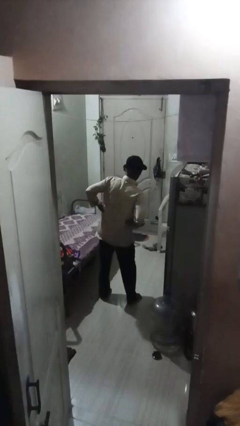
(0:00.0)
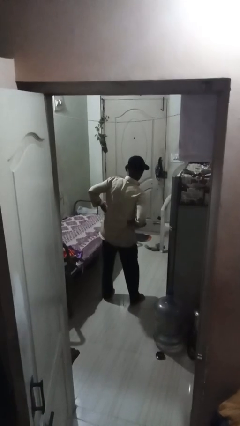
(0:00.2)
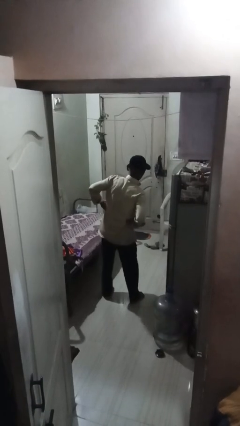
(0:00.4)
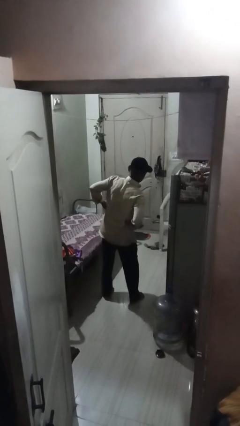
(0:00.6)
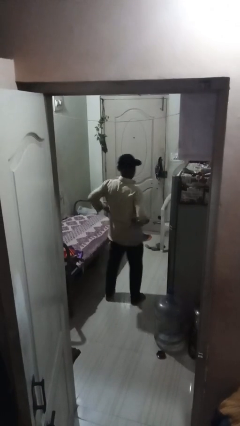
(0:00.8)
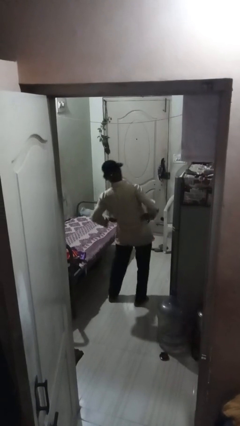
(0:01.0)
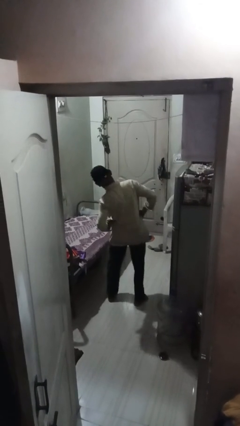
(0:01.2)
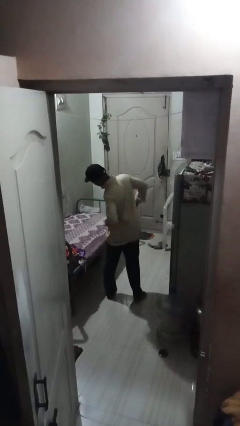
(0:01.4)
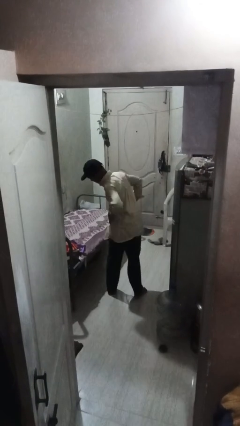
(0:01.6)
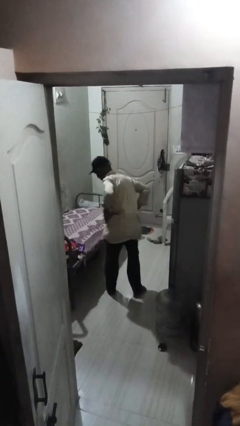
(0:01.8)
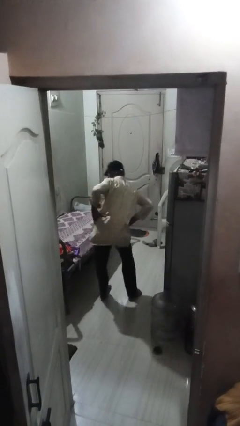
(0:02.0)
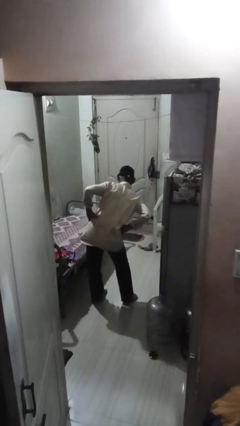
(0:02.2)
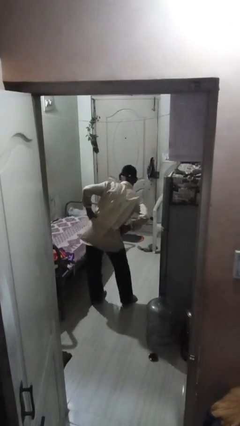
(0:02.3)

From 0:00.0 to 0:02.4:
person wiggles hips

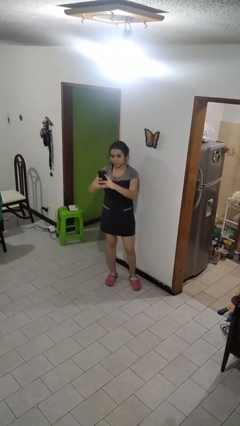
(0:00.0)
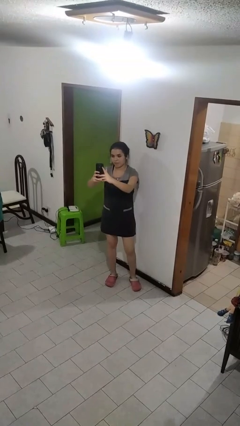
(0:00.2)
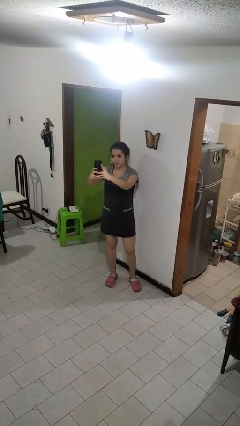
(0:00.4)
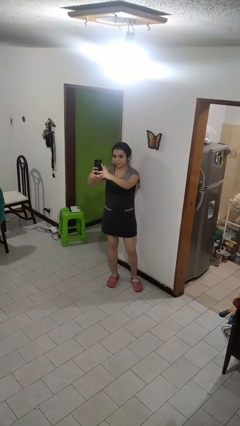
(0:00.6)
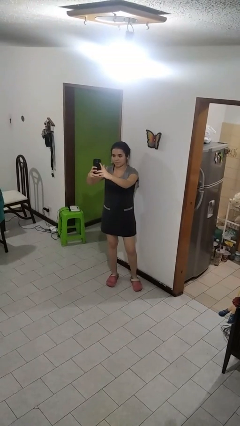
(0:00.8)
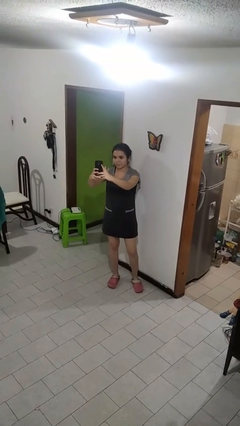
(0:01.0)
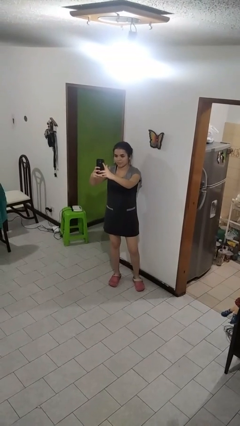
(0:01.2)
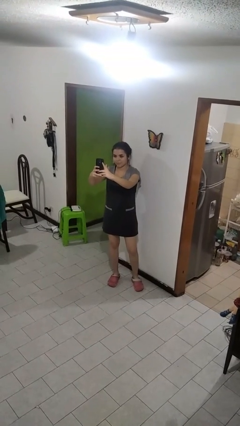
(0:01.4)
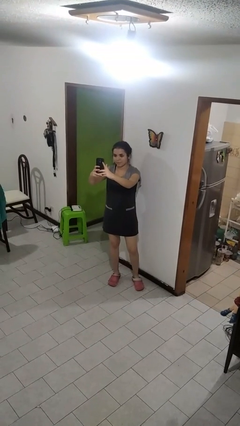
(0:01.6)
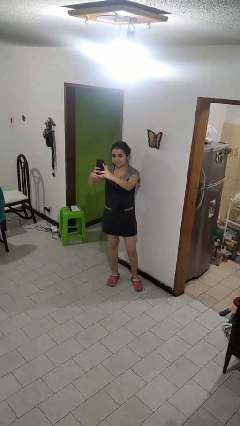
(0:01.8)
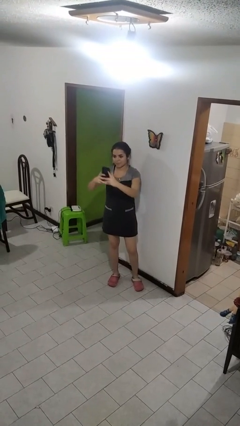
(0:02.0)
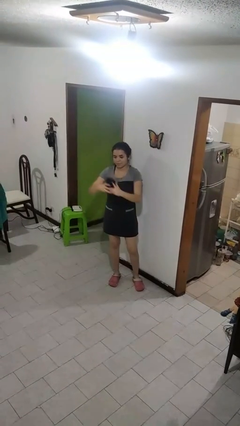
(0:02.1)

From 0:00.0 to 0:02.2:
person takes selfie

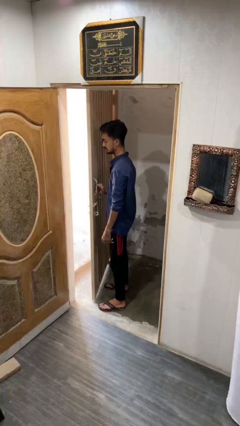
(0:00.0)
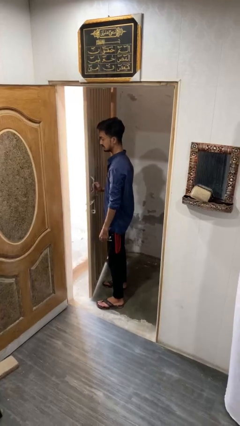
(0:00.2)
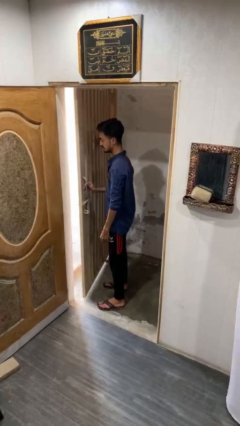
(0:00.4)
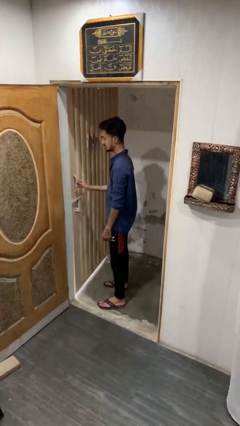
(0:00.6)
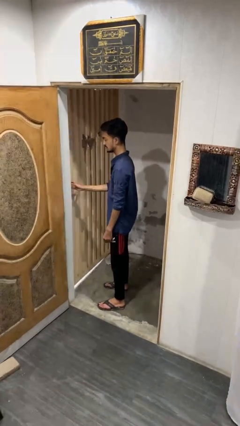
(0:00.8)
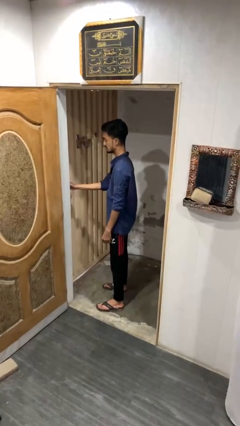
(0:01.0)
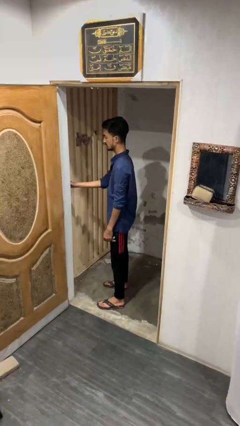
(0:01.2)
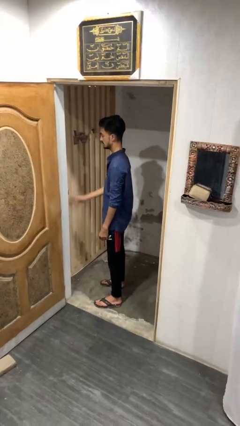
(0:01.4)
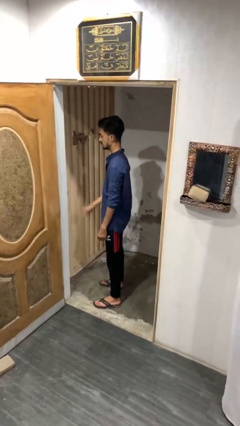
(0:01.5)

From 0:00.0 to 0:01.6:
person closes gate

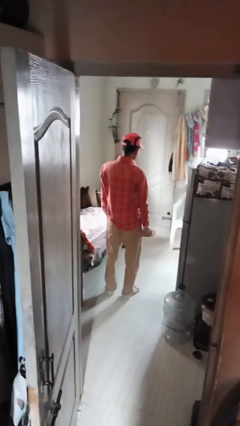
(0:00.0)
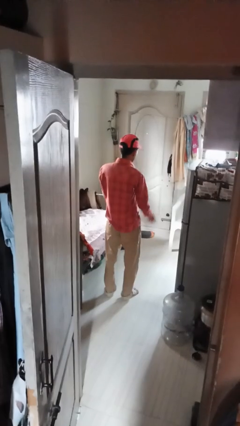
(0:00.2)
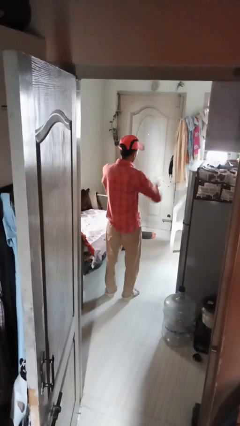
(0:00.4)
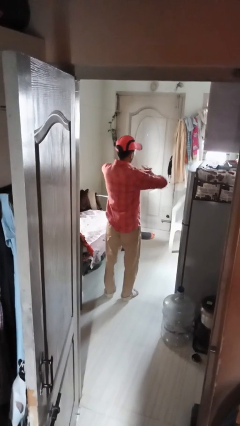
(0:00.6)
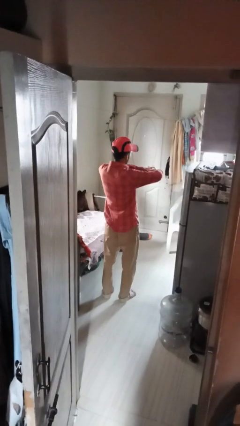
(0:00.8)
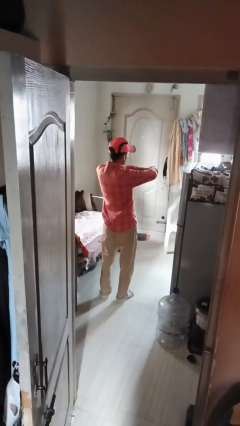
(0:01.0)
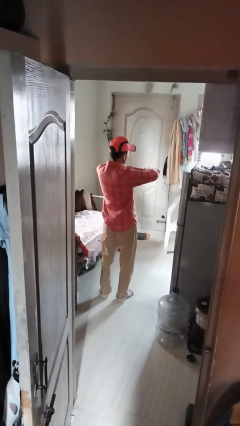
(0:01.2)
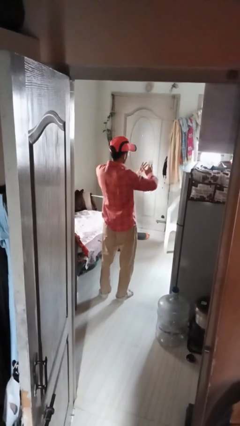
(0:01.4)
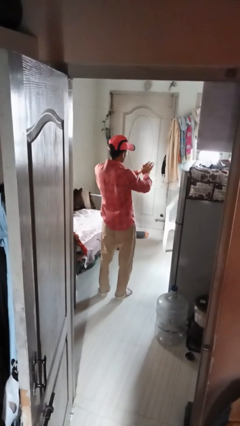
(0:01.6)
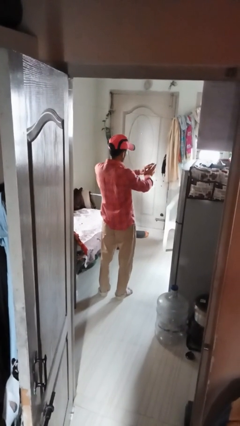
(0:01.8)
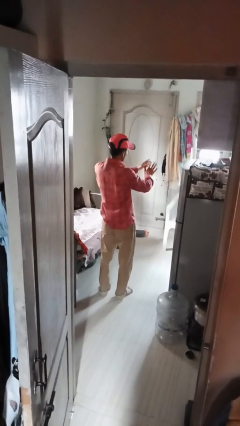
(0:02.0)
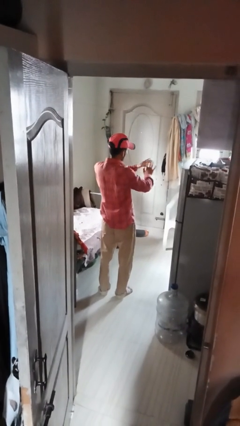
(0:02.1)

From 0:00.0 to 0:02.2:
person cracks knuckles

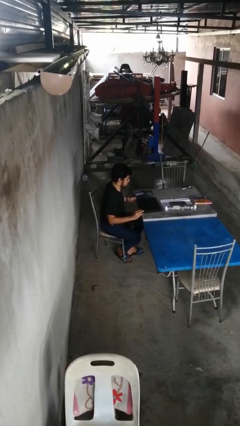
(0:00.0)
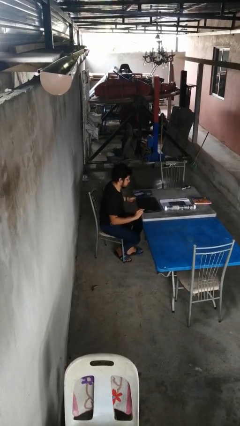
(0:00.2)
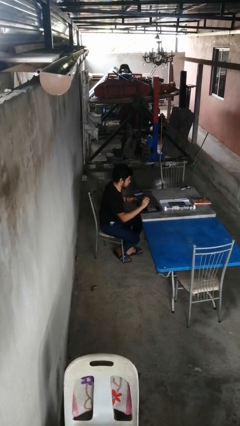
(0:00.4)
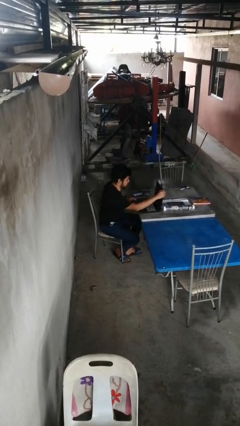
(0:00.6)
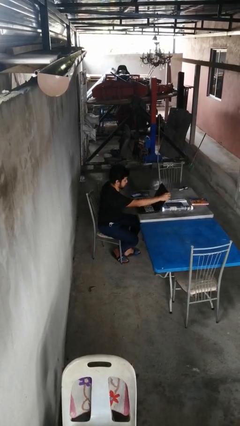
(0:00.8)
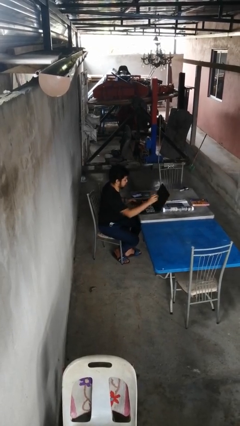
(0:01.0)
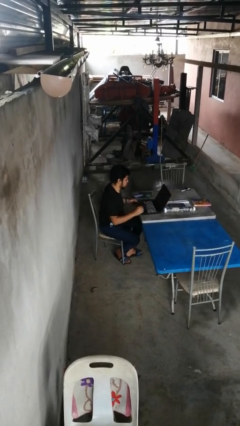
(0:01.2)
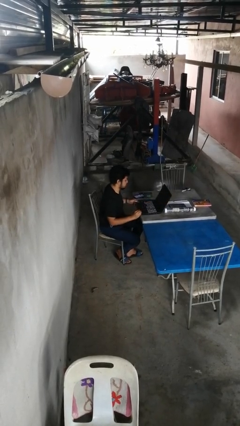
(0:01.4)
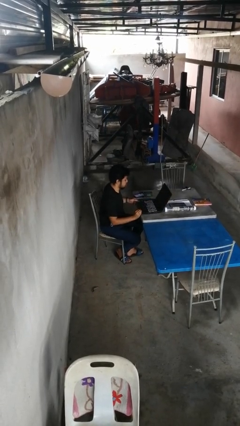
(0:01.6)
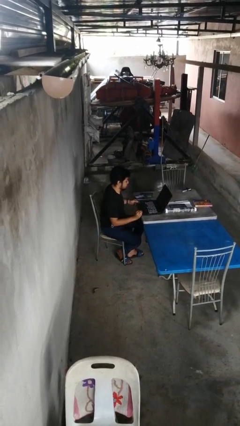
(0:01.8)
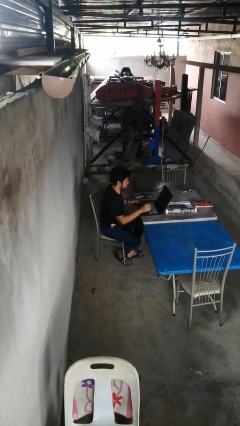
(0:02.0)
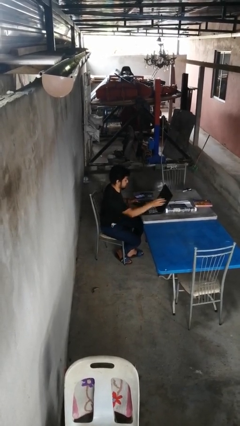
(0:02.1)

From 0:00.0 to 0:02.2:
person opens laptop

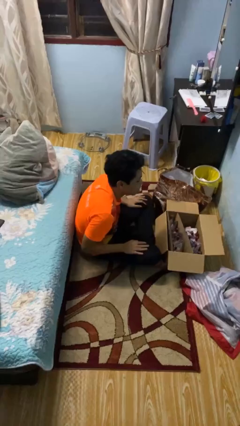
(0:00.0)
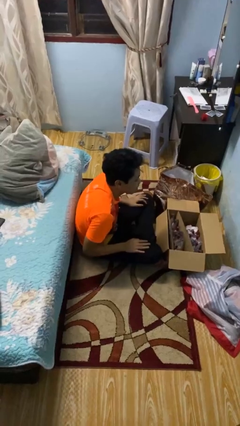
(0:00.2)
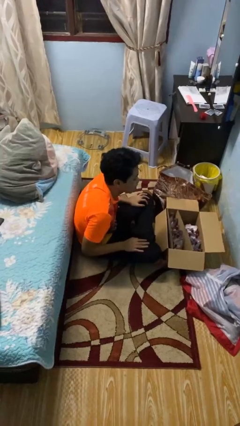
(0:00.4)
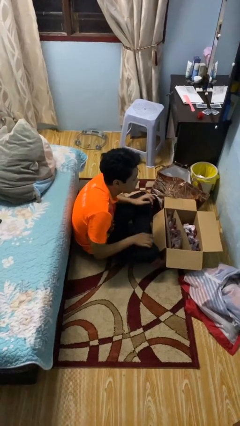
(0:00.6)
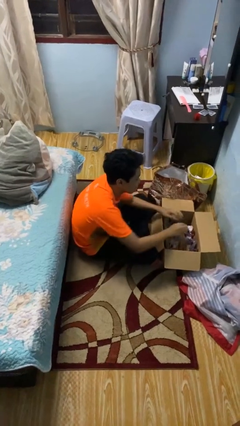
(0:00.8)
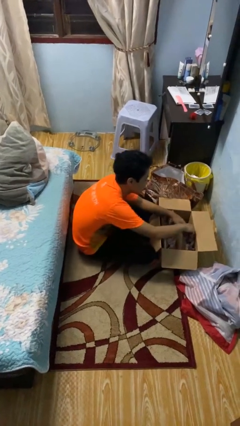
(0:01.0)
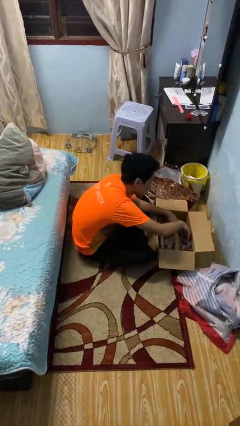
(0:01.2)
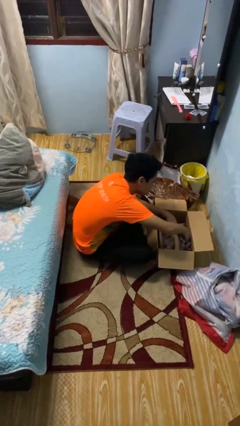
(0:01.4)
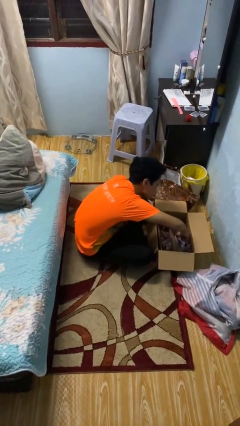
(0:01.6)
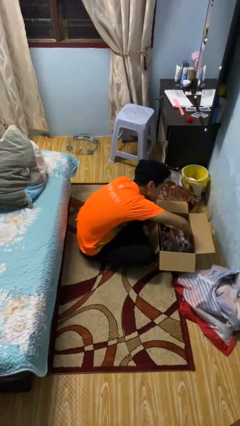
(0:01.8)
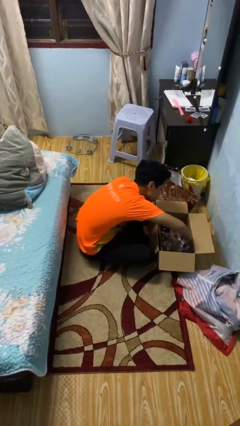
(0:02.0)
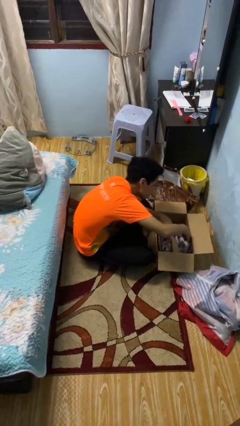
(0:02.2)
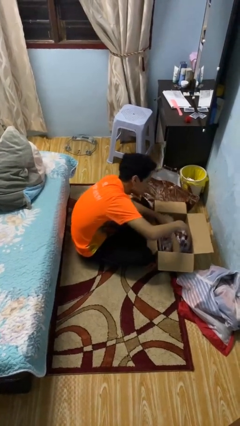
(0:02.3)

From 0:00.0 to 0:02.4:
person searches in bag

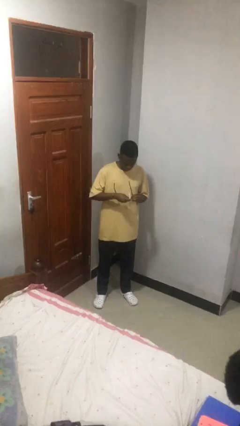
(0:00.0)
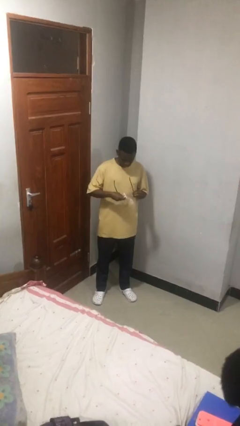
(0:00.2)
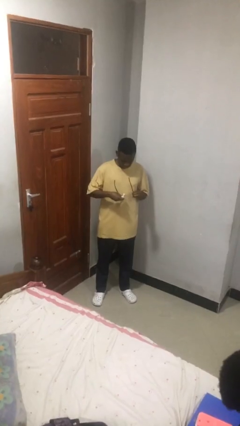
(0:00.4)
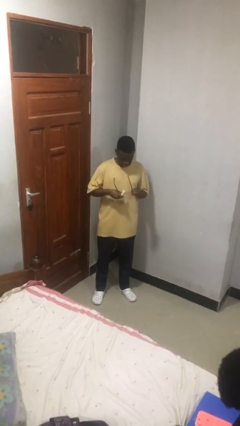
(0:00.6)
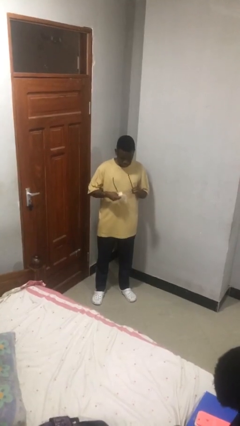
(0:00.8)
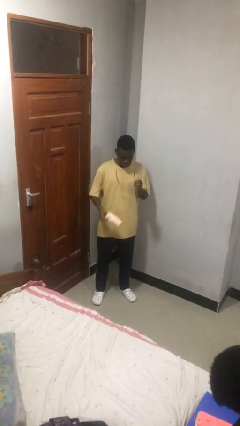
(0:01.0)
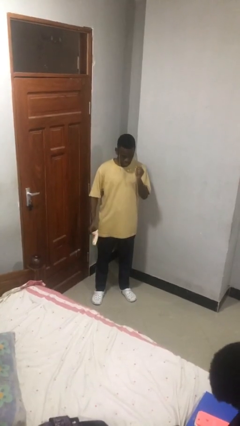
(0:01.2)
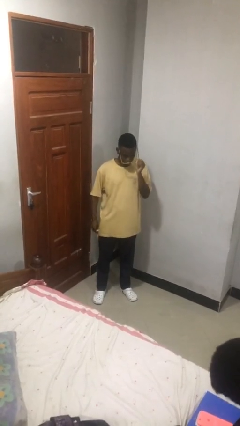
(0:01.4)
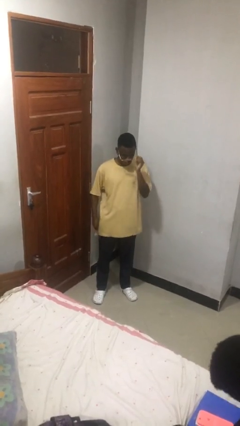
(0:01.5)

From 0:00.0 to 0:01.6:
person cleans eyeglasses

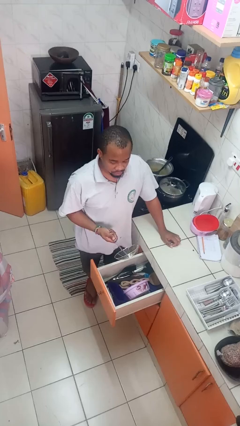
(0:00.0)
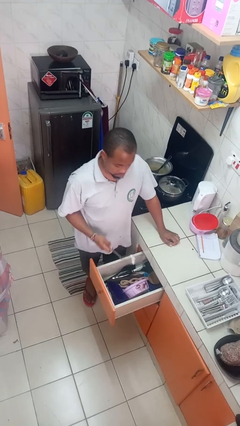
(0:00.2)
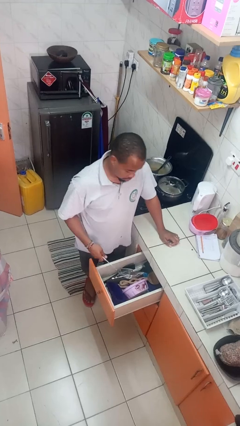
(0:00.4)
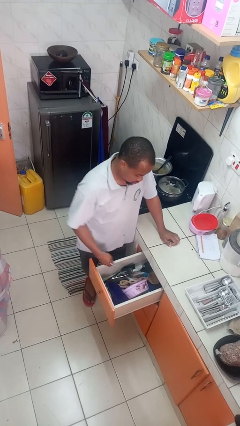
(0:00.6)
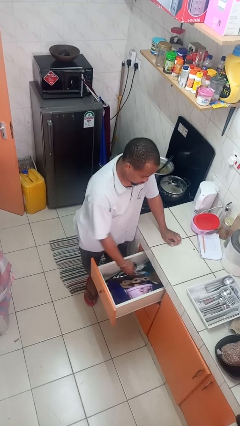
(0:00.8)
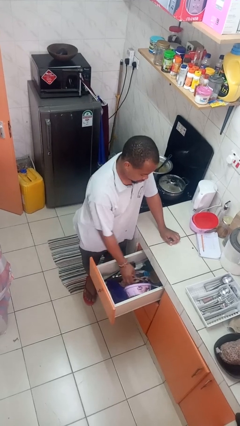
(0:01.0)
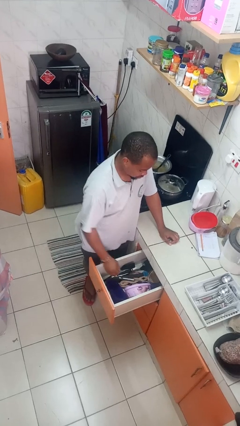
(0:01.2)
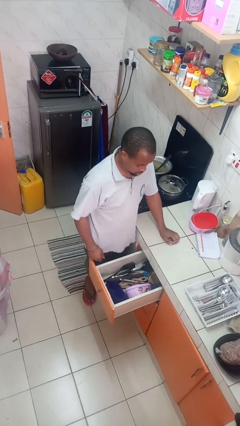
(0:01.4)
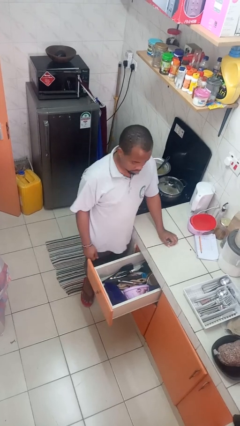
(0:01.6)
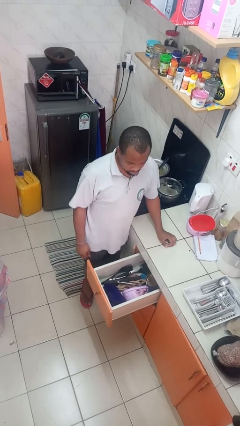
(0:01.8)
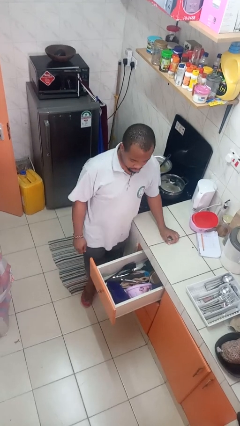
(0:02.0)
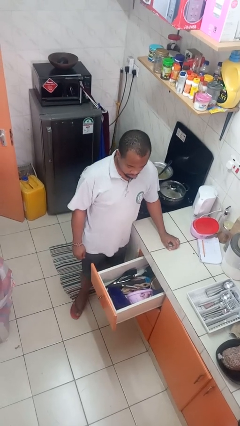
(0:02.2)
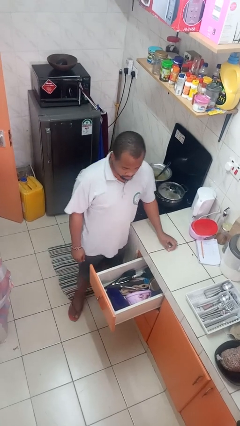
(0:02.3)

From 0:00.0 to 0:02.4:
person puts object into kitchen drawer

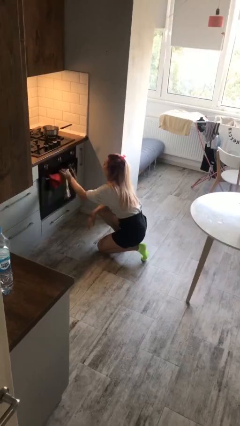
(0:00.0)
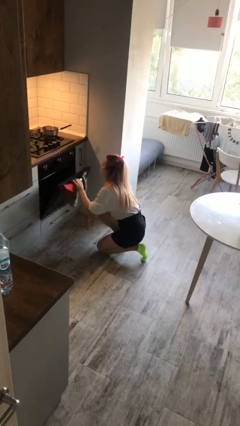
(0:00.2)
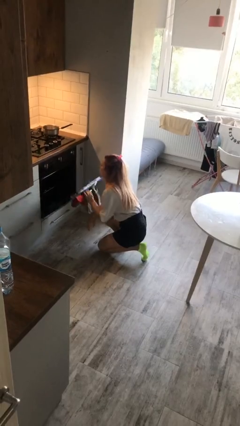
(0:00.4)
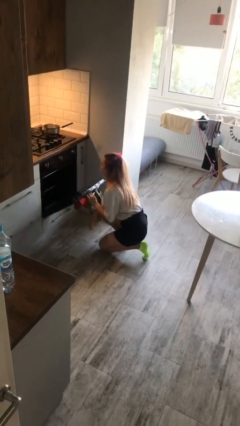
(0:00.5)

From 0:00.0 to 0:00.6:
person opens oven door
